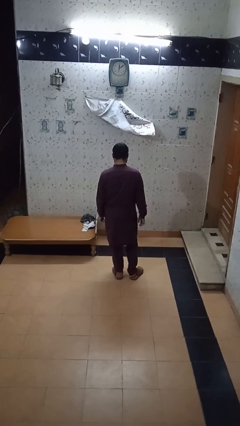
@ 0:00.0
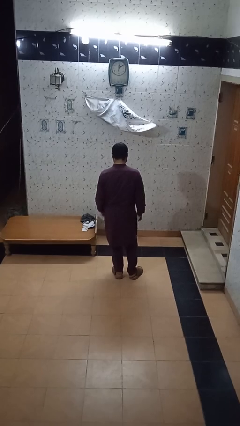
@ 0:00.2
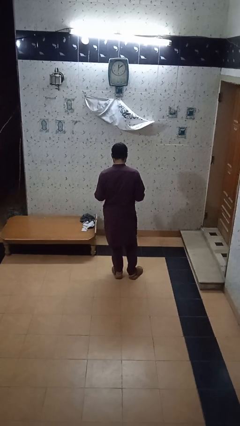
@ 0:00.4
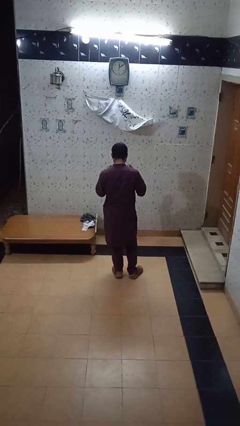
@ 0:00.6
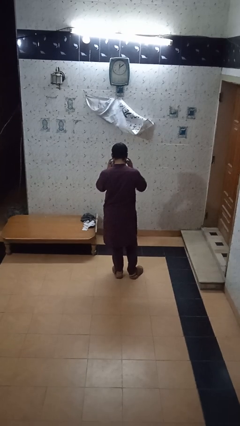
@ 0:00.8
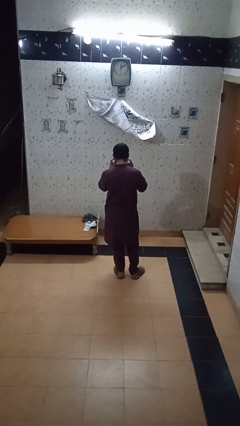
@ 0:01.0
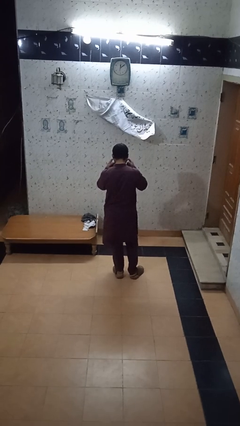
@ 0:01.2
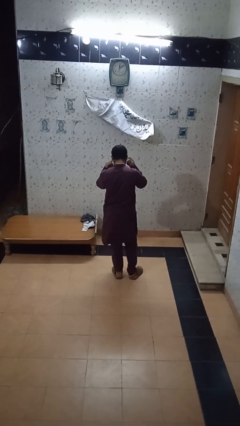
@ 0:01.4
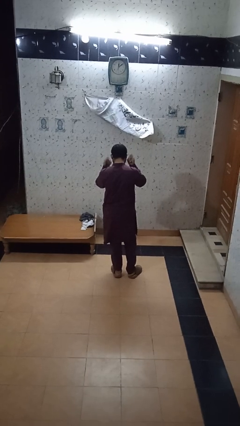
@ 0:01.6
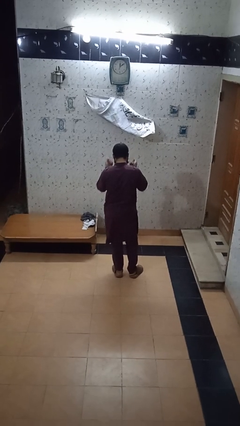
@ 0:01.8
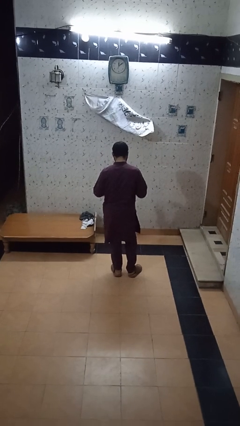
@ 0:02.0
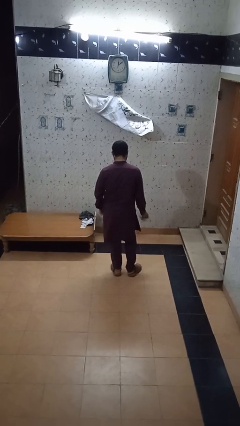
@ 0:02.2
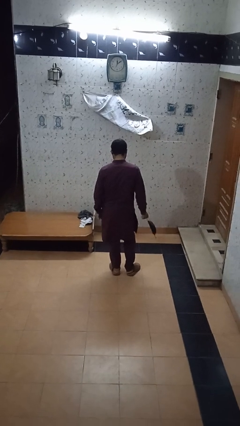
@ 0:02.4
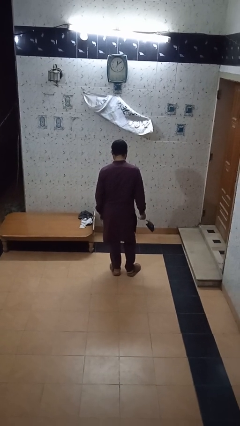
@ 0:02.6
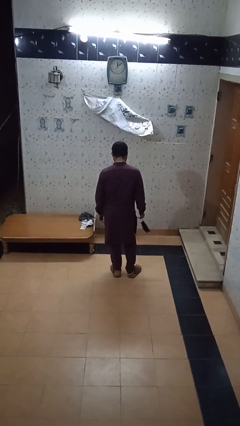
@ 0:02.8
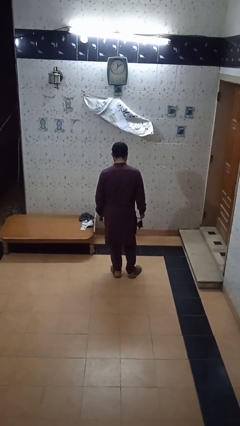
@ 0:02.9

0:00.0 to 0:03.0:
person takes off facemask

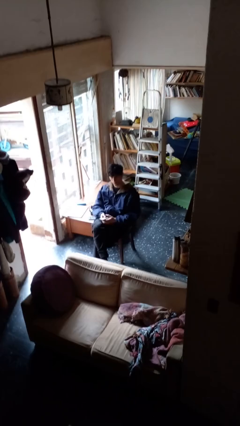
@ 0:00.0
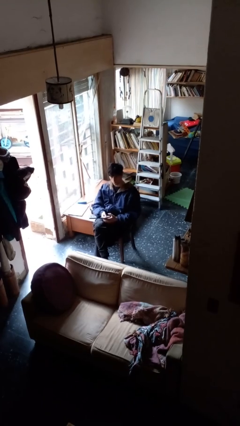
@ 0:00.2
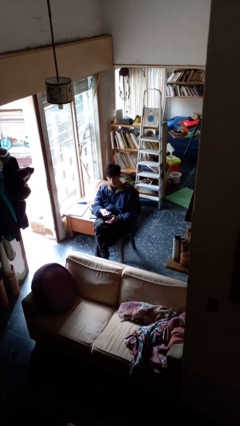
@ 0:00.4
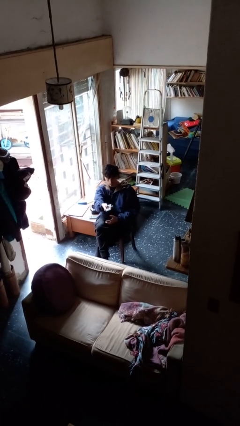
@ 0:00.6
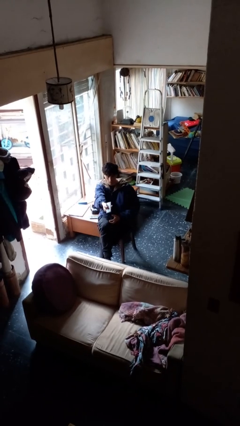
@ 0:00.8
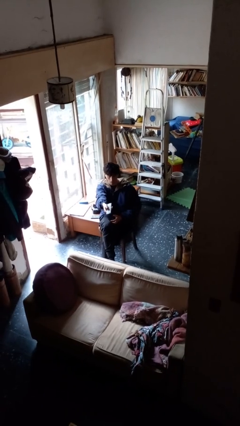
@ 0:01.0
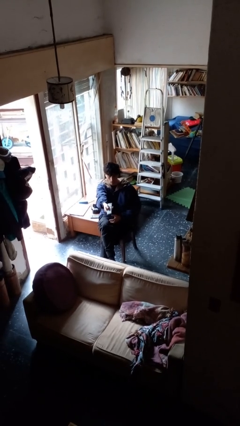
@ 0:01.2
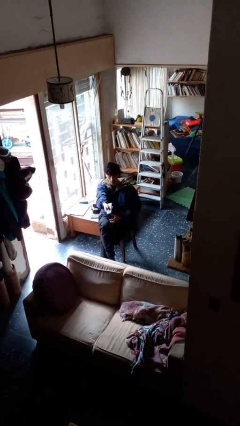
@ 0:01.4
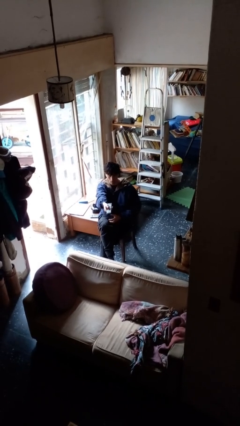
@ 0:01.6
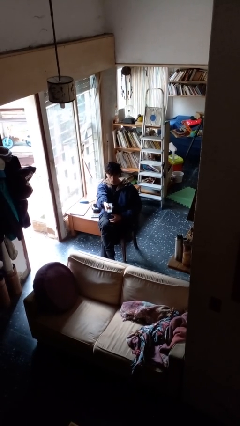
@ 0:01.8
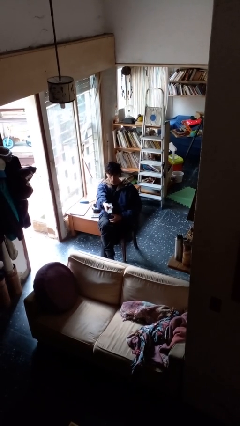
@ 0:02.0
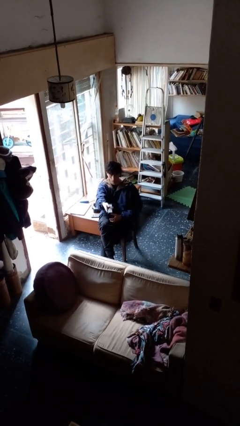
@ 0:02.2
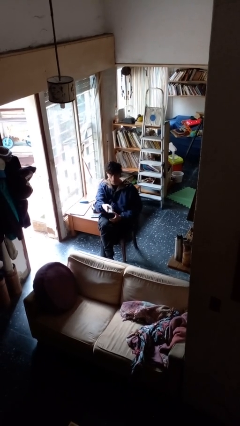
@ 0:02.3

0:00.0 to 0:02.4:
person uses television remote

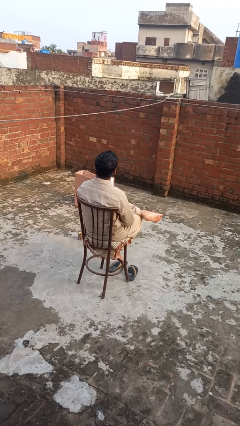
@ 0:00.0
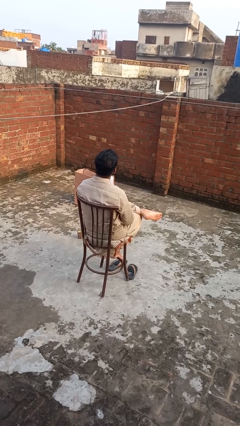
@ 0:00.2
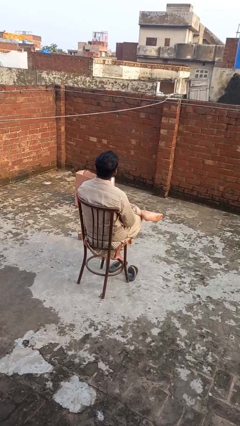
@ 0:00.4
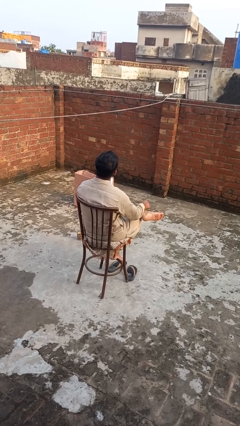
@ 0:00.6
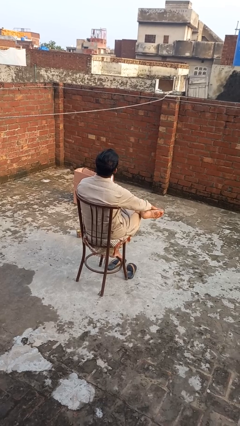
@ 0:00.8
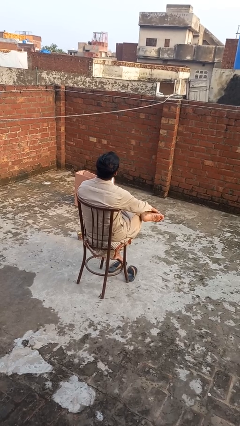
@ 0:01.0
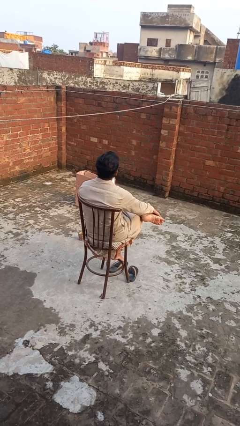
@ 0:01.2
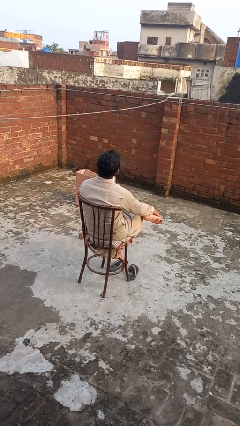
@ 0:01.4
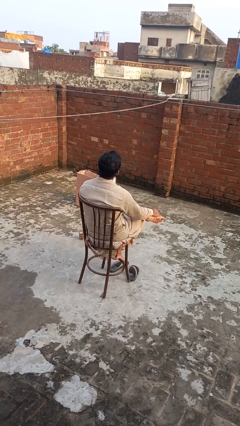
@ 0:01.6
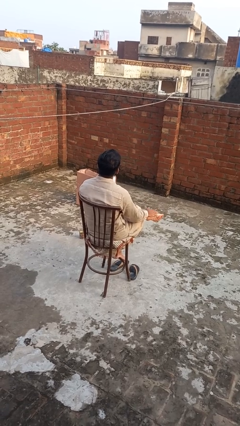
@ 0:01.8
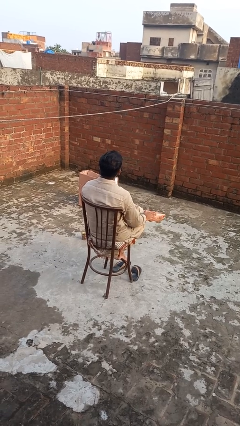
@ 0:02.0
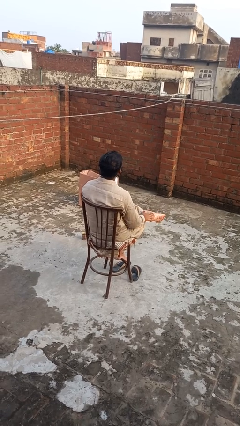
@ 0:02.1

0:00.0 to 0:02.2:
person rubs foot

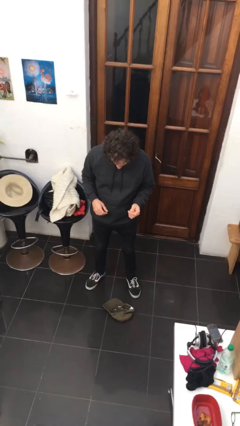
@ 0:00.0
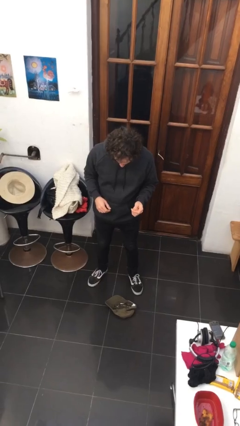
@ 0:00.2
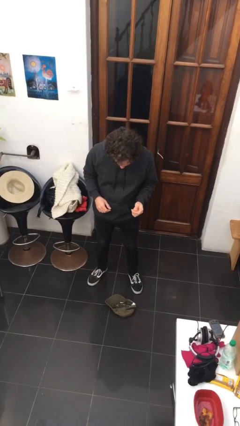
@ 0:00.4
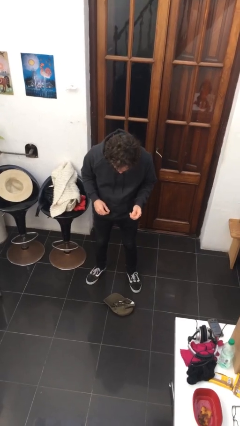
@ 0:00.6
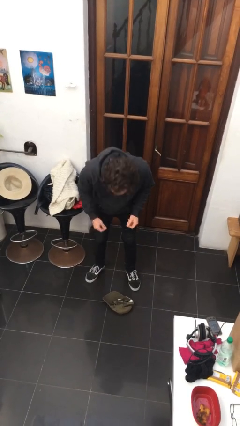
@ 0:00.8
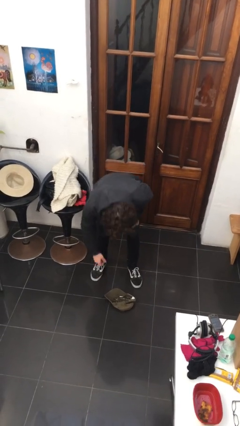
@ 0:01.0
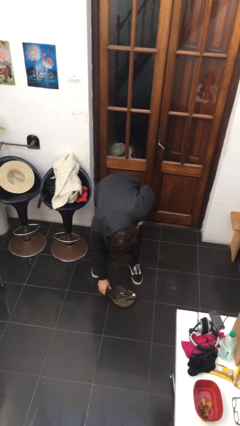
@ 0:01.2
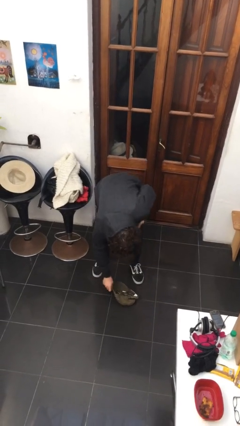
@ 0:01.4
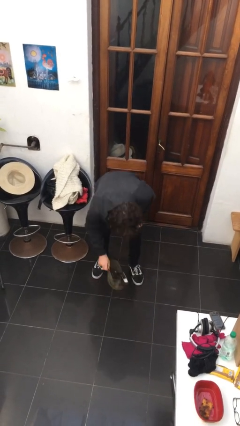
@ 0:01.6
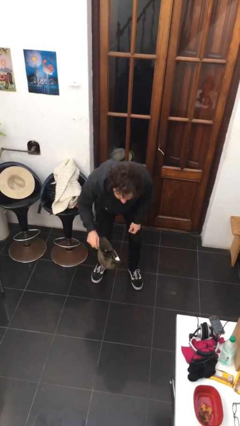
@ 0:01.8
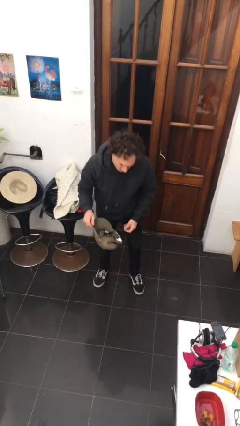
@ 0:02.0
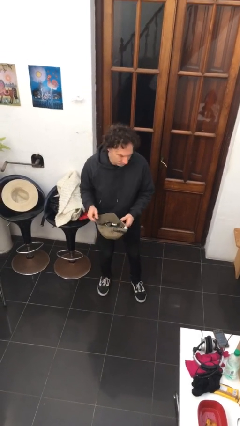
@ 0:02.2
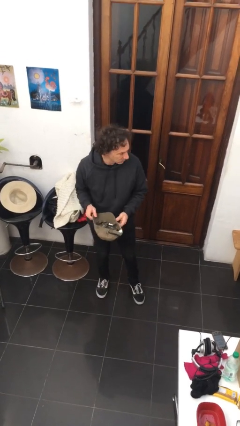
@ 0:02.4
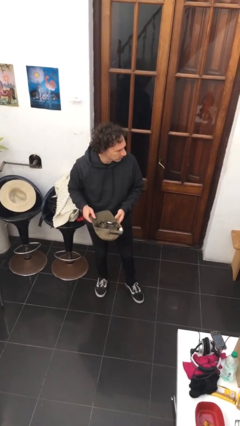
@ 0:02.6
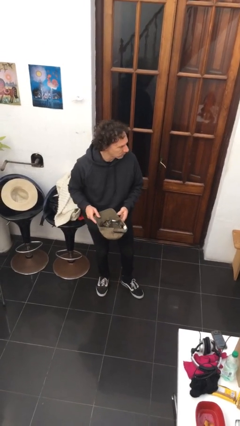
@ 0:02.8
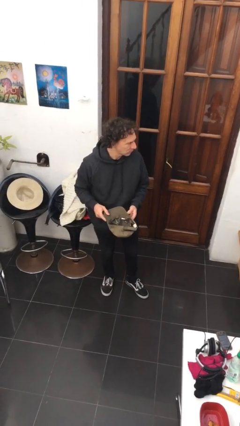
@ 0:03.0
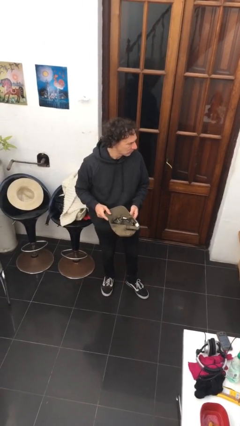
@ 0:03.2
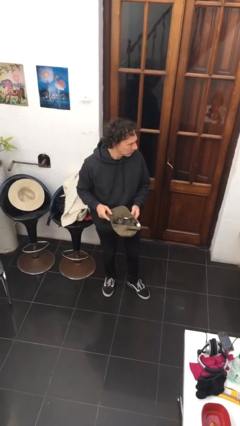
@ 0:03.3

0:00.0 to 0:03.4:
person picks up object from floor

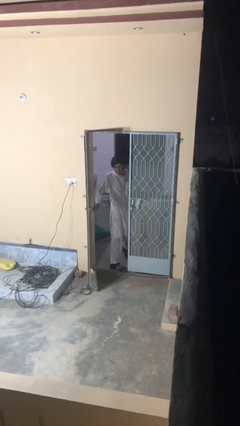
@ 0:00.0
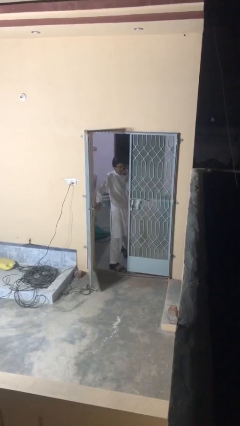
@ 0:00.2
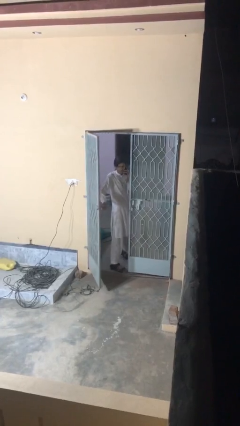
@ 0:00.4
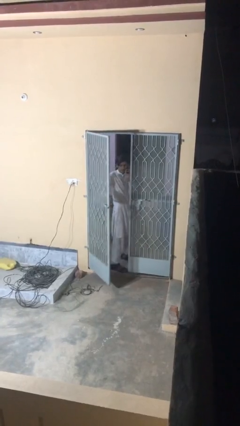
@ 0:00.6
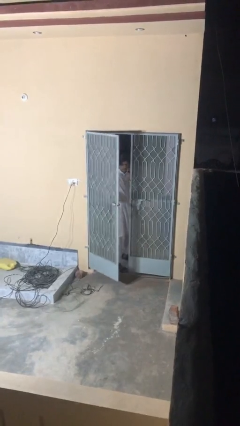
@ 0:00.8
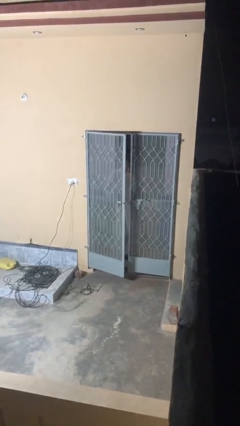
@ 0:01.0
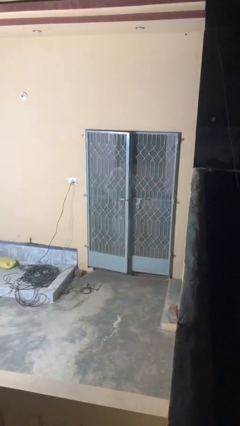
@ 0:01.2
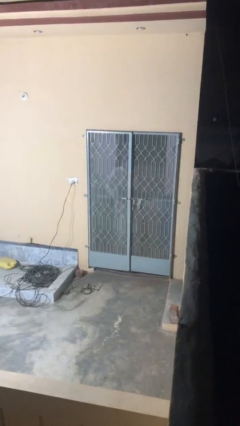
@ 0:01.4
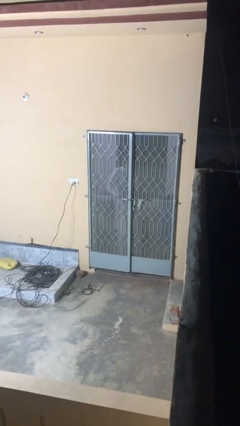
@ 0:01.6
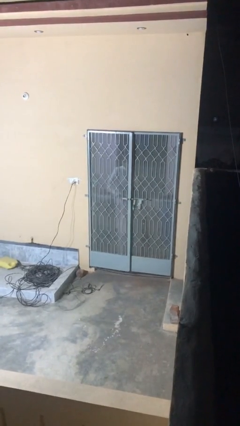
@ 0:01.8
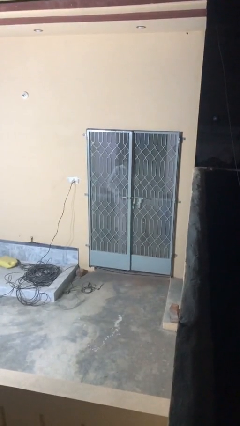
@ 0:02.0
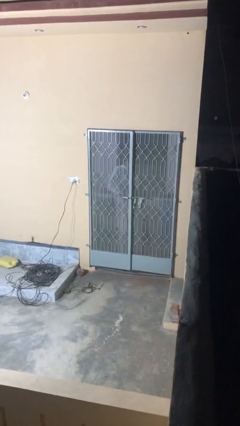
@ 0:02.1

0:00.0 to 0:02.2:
person closes facility door

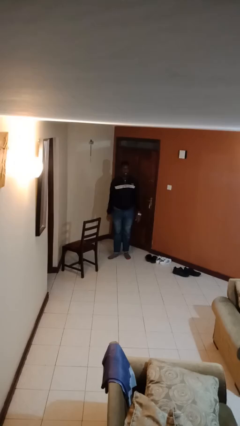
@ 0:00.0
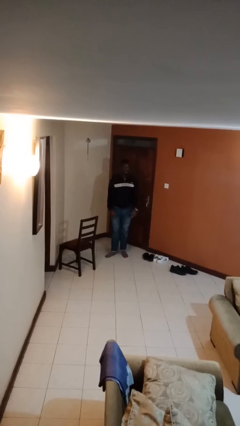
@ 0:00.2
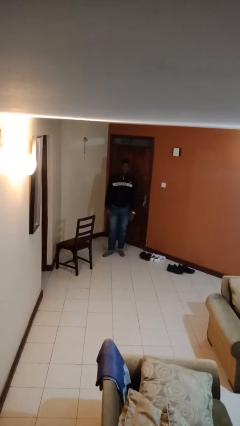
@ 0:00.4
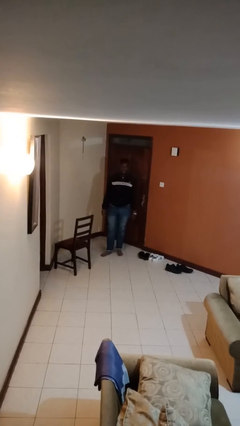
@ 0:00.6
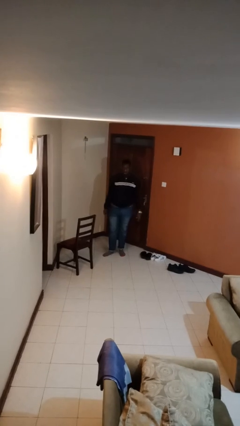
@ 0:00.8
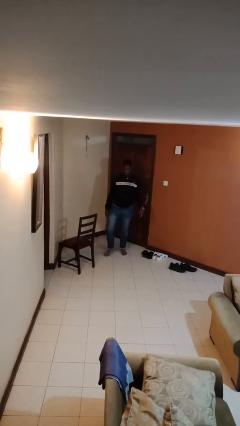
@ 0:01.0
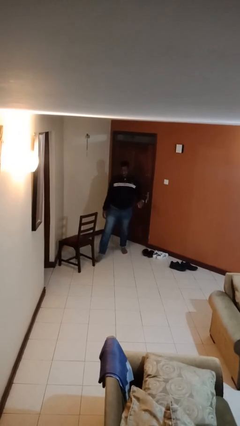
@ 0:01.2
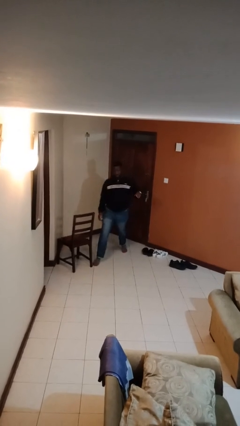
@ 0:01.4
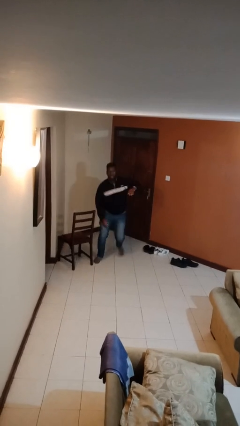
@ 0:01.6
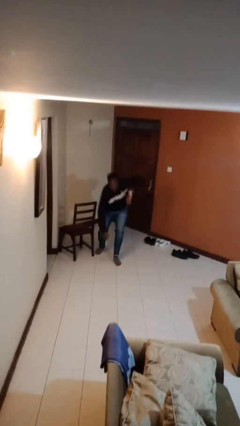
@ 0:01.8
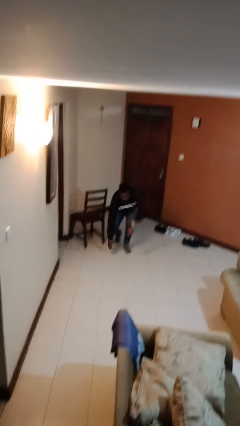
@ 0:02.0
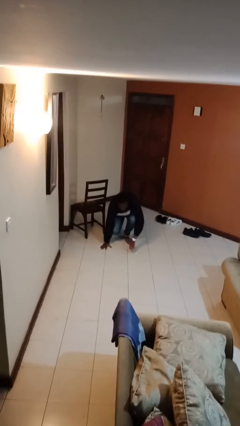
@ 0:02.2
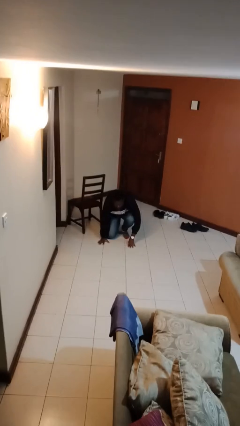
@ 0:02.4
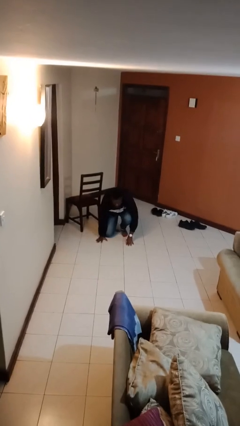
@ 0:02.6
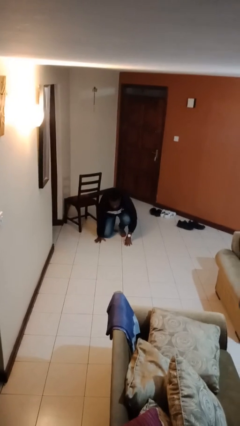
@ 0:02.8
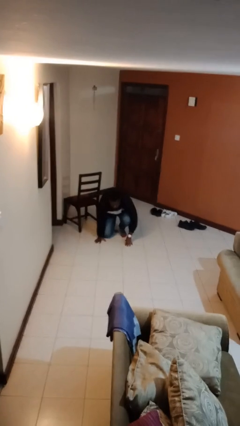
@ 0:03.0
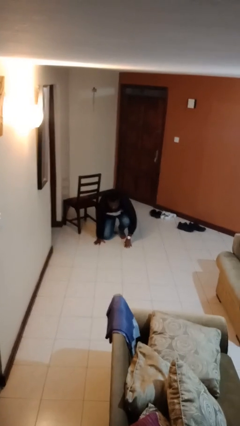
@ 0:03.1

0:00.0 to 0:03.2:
person trips on object on floor

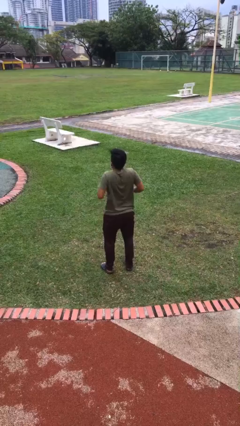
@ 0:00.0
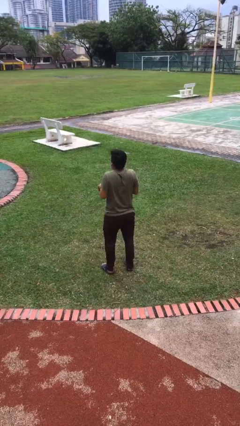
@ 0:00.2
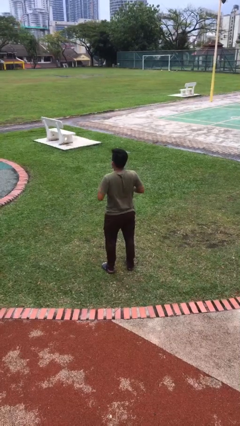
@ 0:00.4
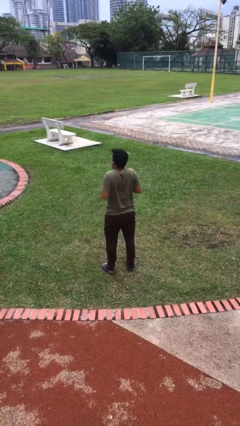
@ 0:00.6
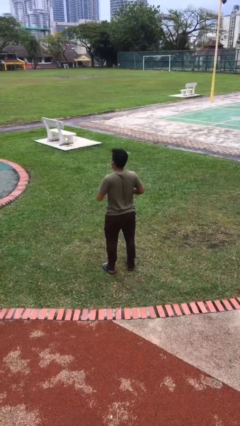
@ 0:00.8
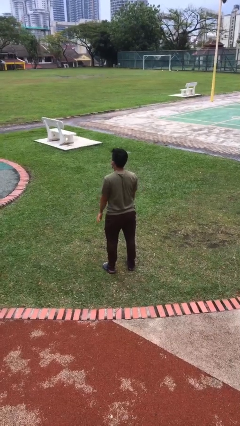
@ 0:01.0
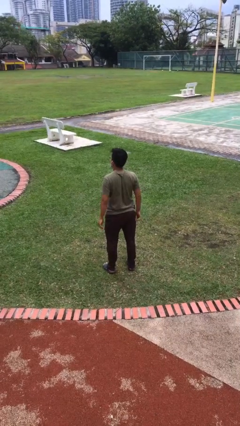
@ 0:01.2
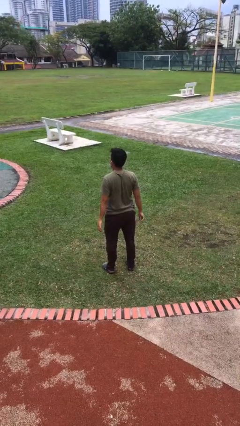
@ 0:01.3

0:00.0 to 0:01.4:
person shrugs
